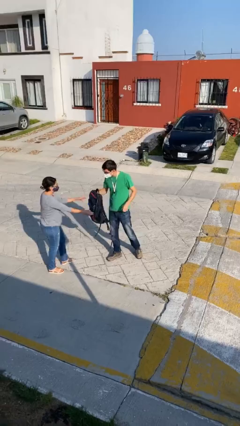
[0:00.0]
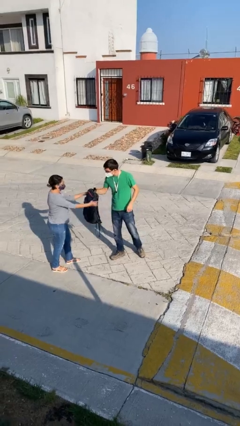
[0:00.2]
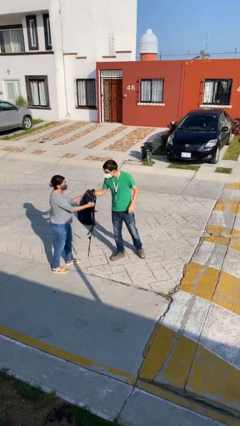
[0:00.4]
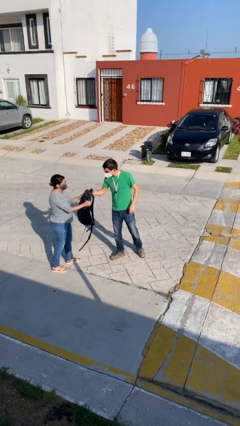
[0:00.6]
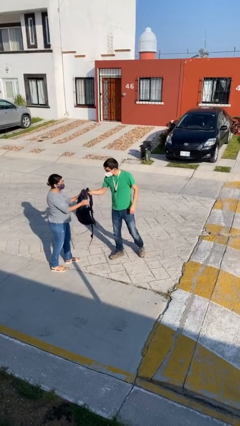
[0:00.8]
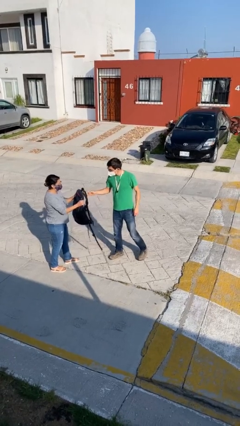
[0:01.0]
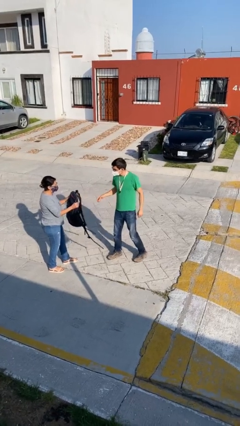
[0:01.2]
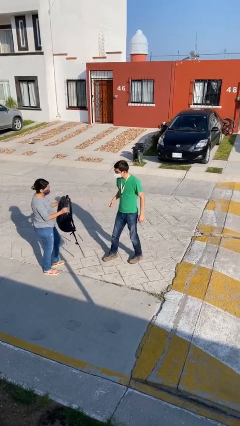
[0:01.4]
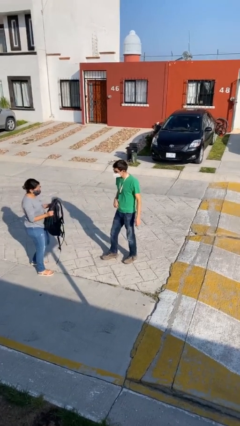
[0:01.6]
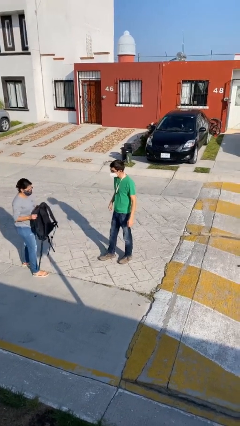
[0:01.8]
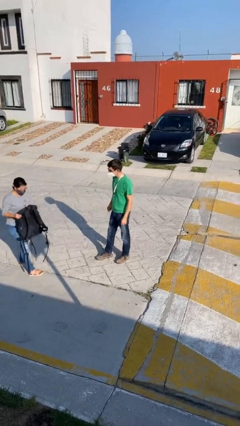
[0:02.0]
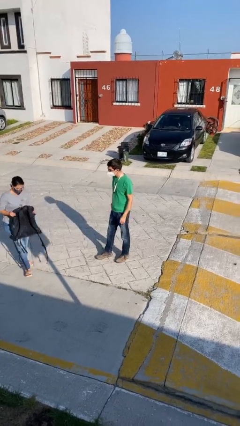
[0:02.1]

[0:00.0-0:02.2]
person transfers object to person

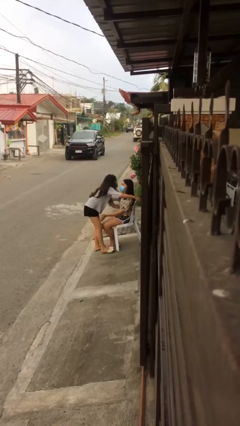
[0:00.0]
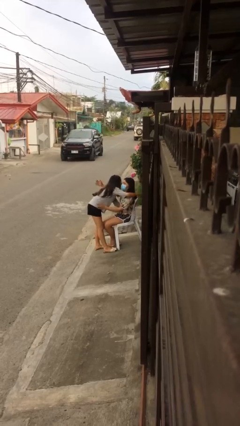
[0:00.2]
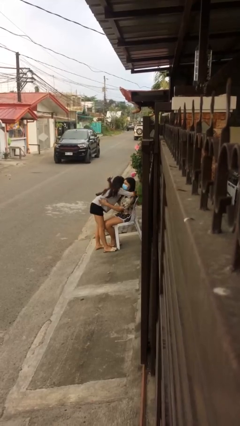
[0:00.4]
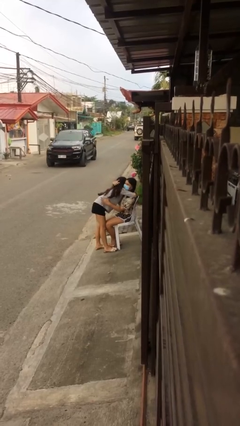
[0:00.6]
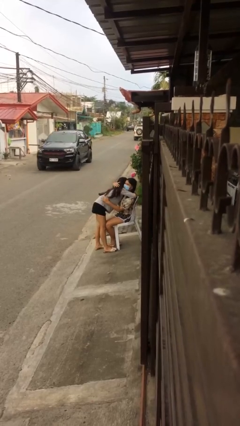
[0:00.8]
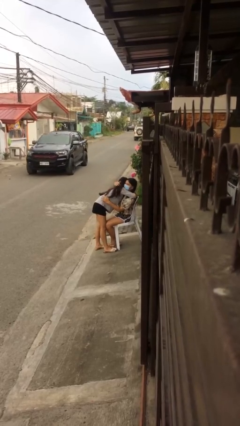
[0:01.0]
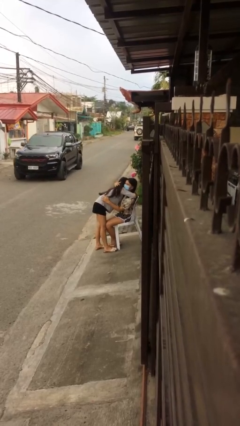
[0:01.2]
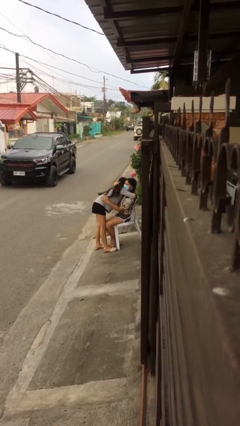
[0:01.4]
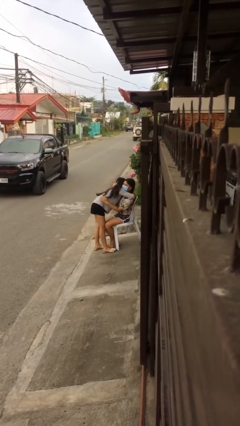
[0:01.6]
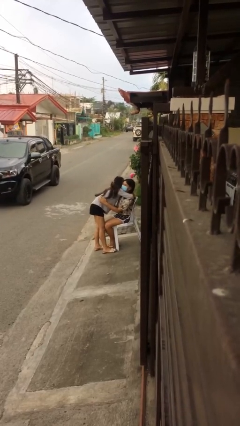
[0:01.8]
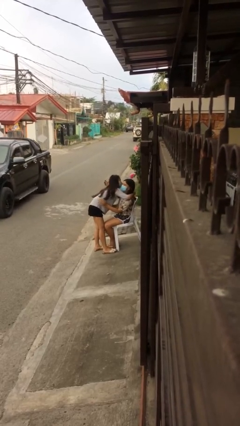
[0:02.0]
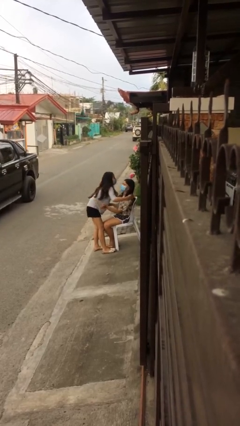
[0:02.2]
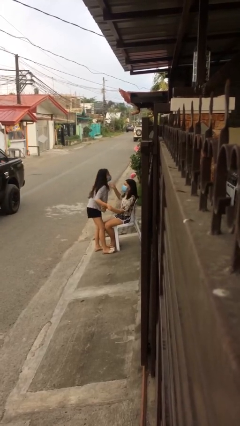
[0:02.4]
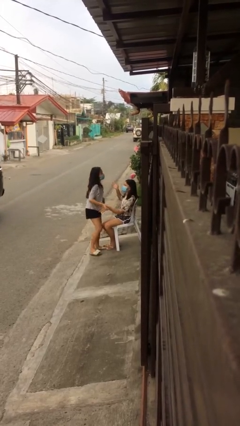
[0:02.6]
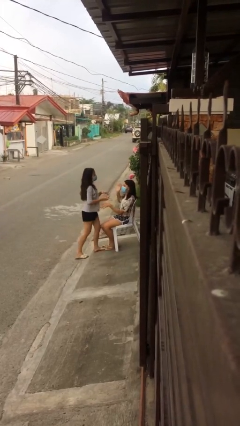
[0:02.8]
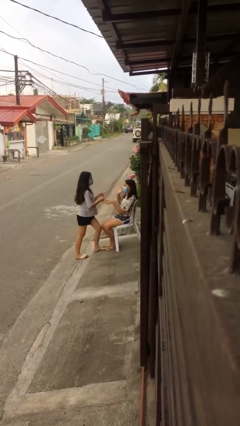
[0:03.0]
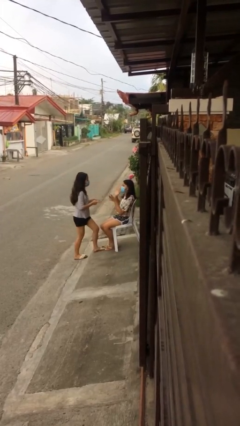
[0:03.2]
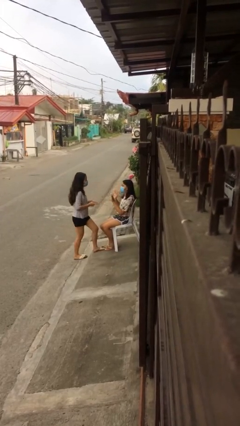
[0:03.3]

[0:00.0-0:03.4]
person embraces person

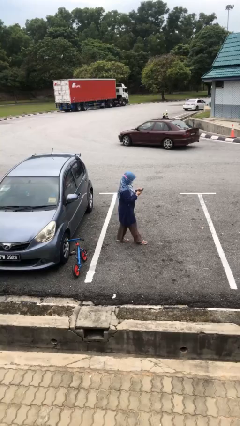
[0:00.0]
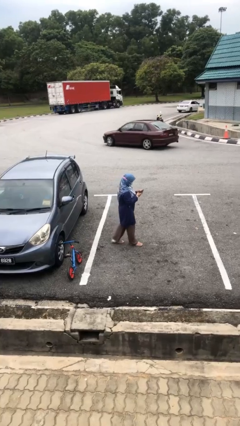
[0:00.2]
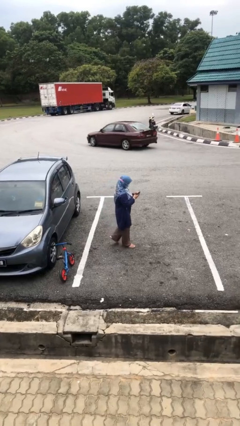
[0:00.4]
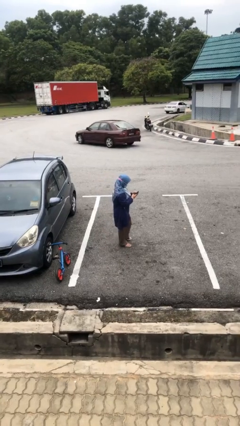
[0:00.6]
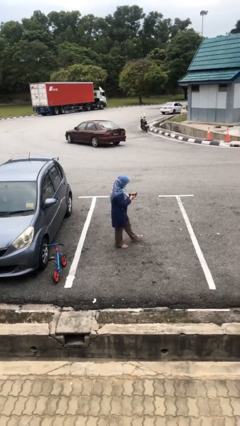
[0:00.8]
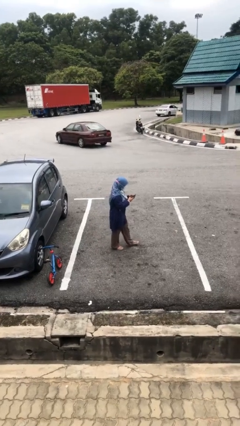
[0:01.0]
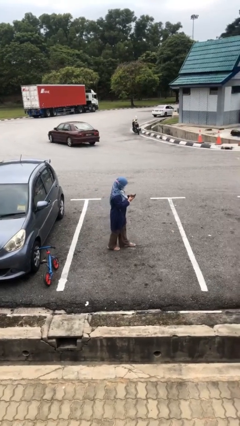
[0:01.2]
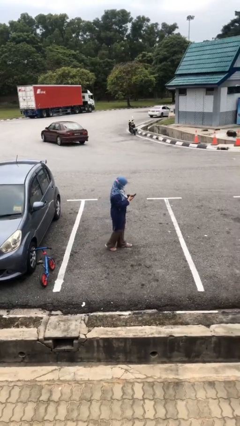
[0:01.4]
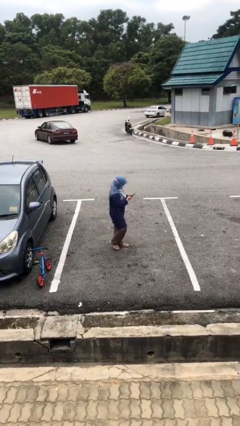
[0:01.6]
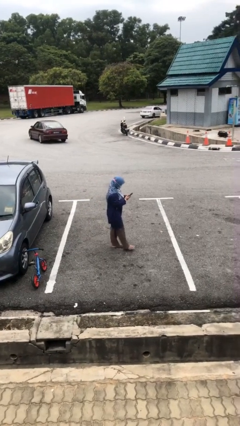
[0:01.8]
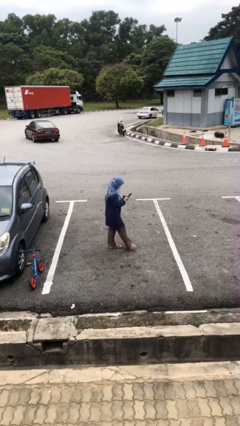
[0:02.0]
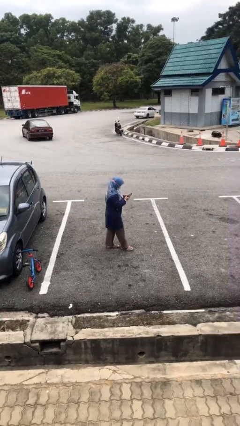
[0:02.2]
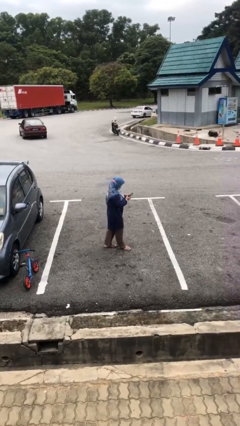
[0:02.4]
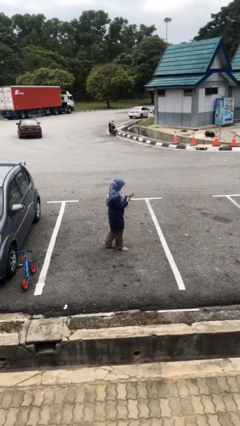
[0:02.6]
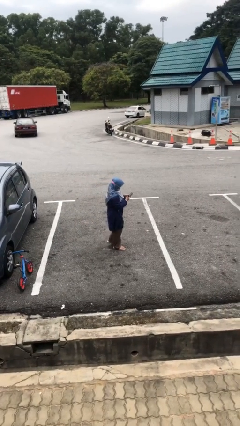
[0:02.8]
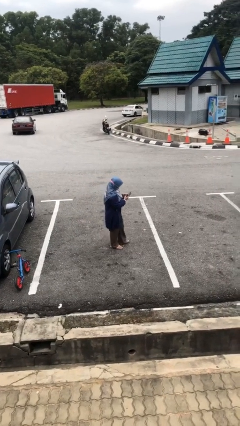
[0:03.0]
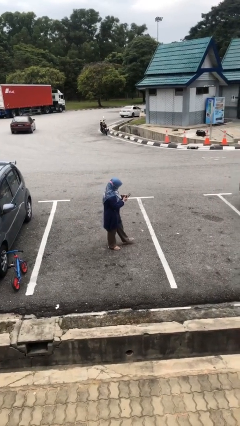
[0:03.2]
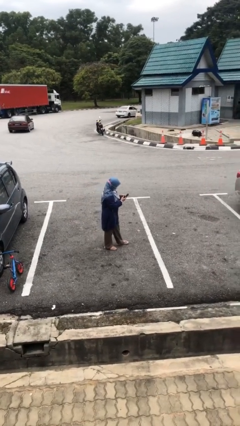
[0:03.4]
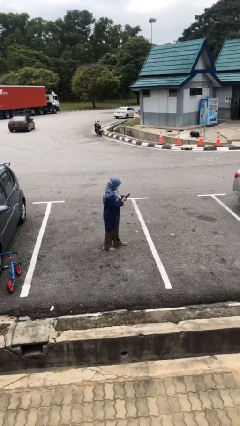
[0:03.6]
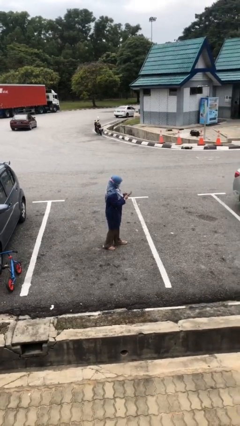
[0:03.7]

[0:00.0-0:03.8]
person texts on phone

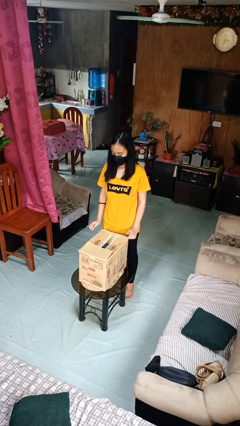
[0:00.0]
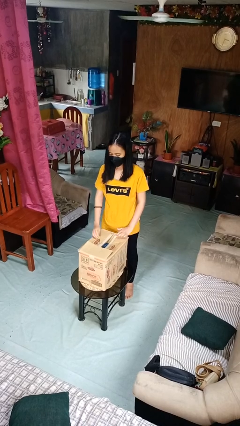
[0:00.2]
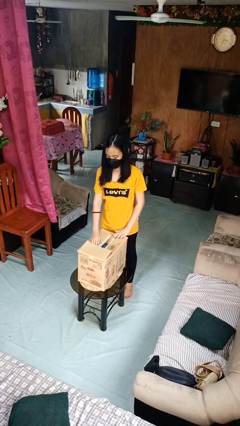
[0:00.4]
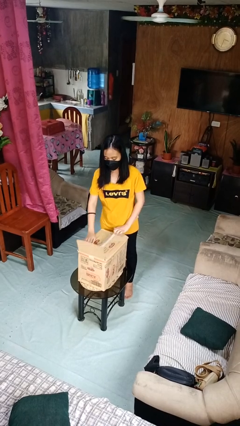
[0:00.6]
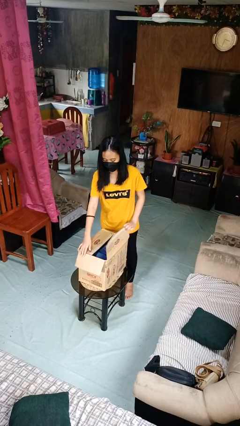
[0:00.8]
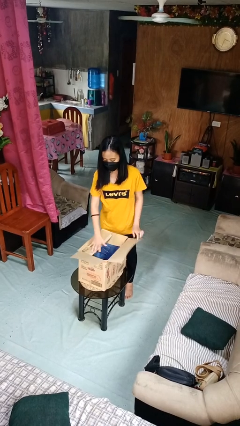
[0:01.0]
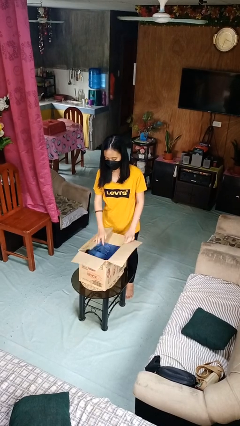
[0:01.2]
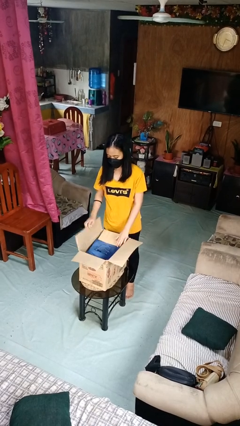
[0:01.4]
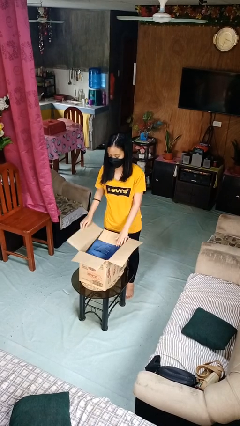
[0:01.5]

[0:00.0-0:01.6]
person opens box

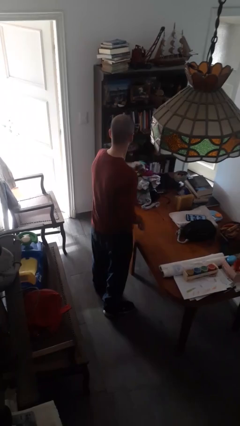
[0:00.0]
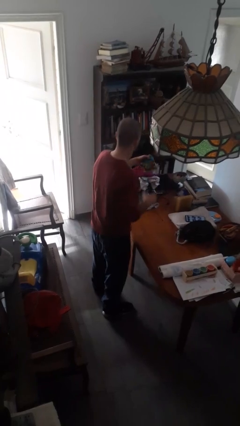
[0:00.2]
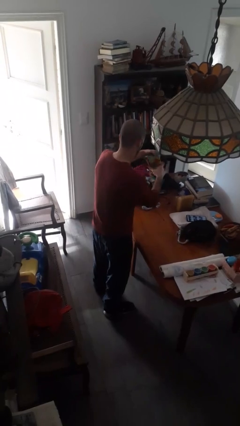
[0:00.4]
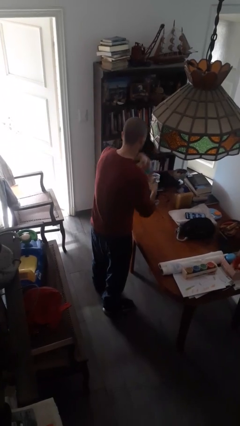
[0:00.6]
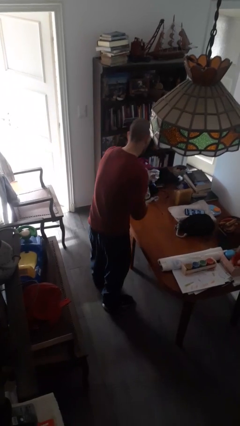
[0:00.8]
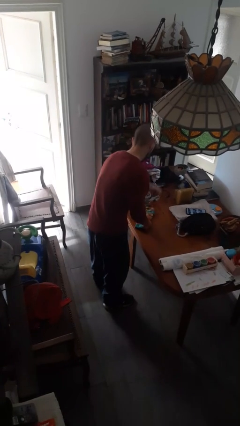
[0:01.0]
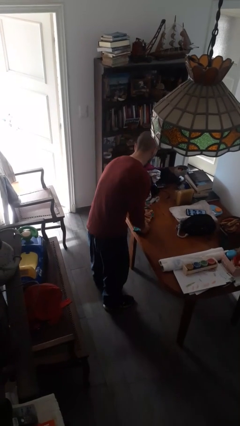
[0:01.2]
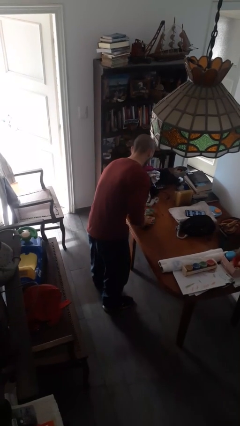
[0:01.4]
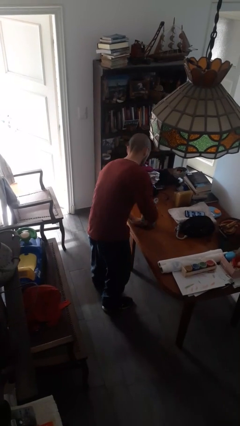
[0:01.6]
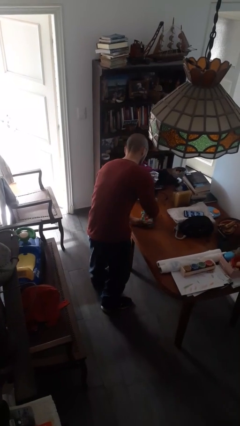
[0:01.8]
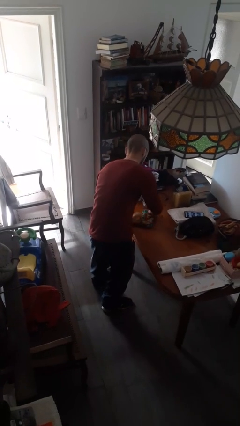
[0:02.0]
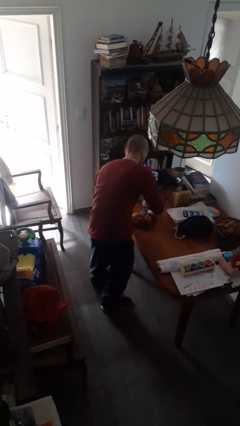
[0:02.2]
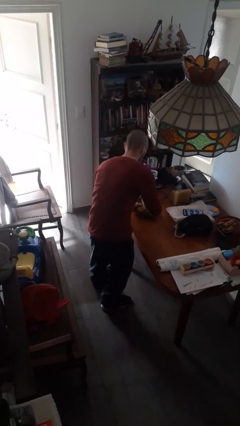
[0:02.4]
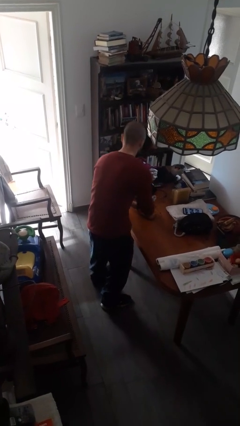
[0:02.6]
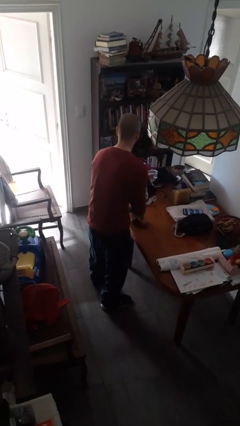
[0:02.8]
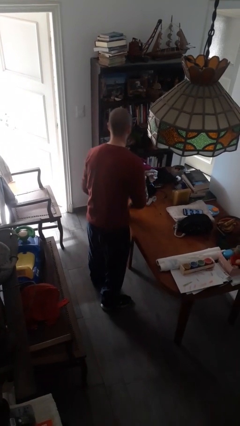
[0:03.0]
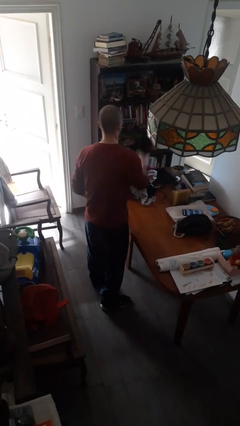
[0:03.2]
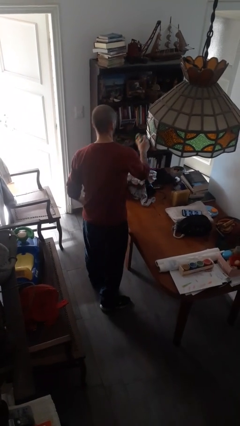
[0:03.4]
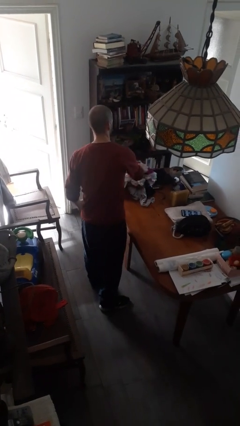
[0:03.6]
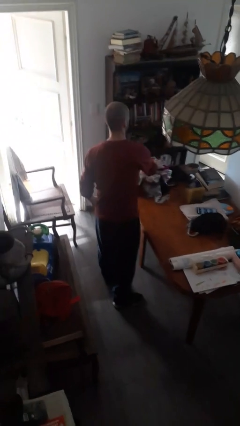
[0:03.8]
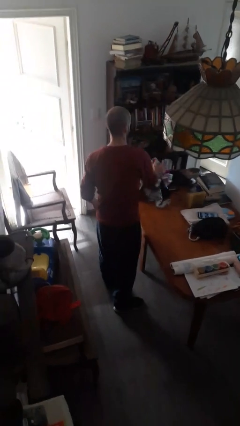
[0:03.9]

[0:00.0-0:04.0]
person folds socks

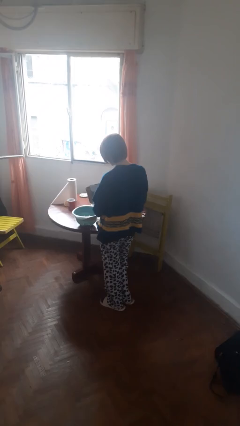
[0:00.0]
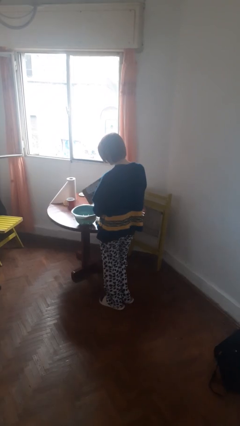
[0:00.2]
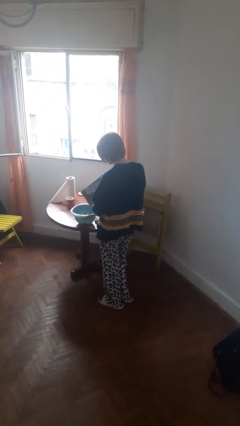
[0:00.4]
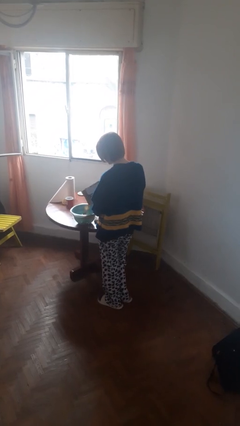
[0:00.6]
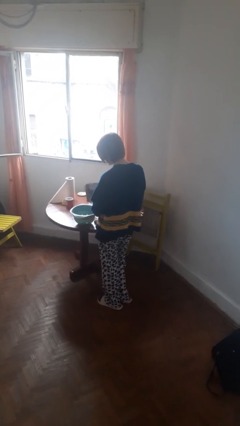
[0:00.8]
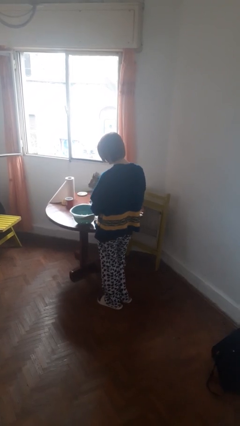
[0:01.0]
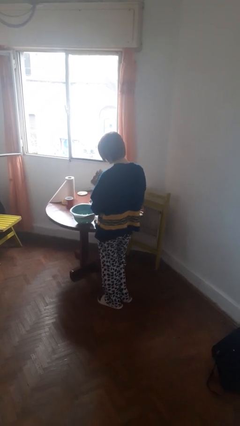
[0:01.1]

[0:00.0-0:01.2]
person pours into bowl

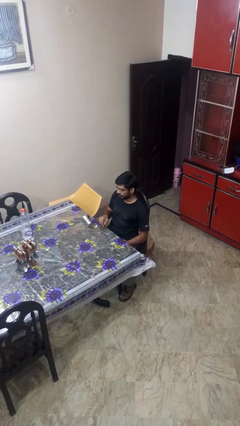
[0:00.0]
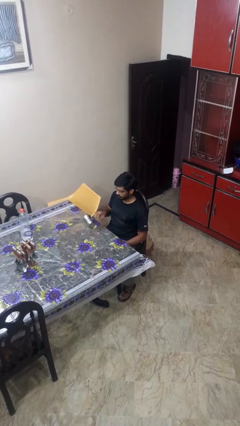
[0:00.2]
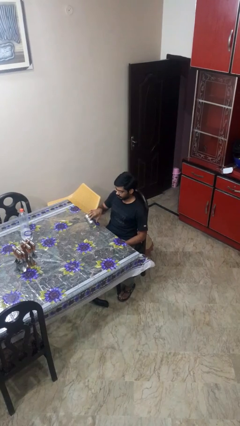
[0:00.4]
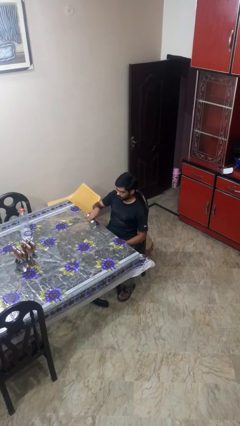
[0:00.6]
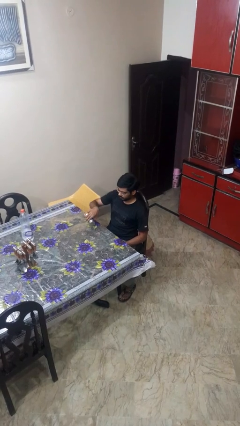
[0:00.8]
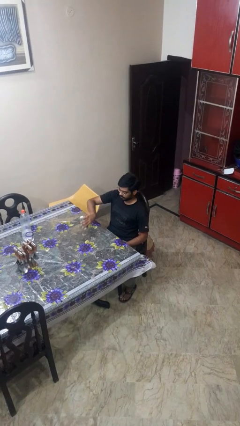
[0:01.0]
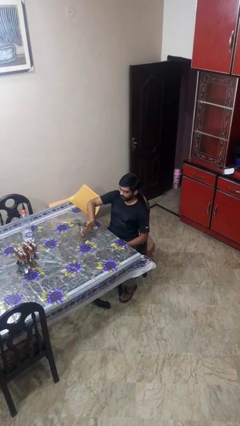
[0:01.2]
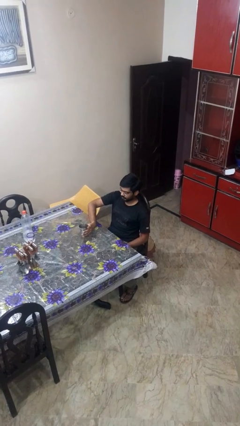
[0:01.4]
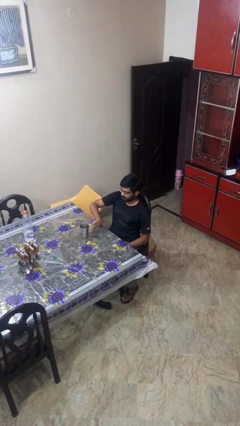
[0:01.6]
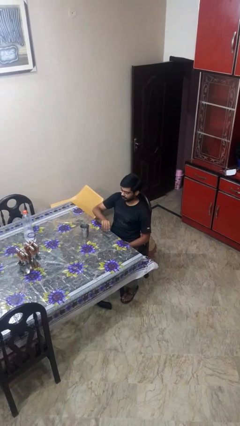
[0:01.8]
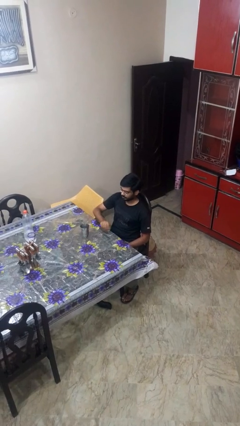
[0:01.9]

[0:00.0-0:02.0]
person sets upright glass
